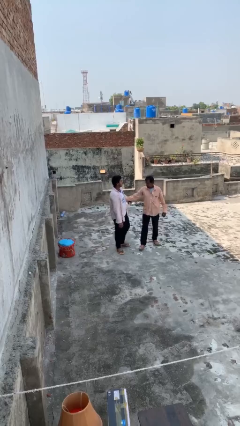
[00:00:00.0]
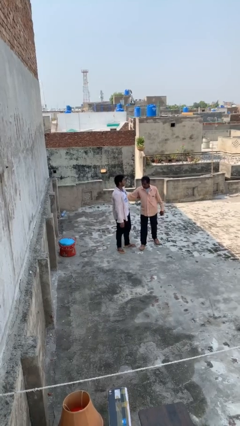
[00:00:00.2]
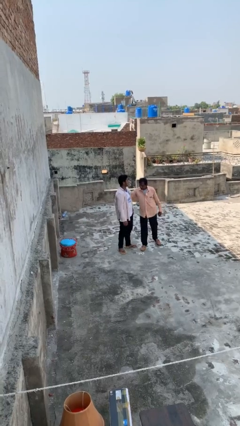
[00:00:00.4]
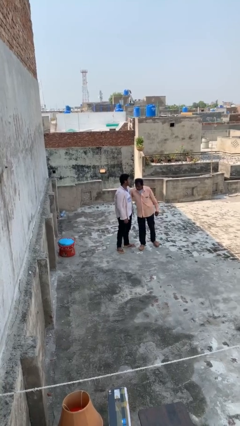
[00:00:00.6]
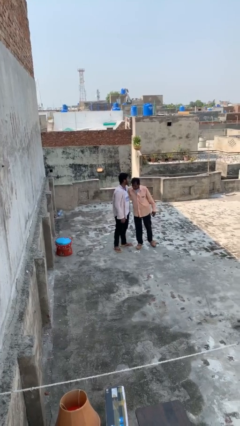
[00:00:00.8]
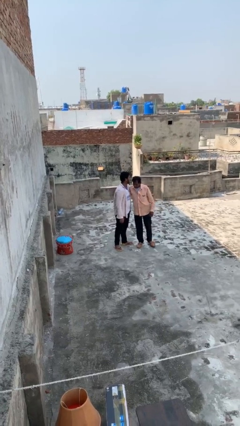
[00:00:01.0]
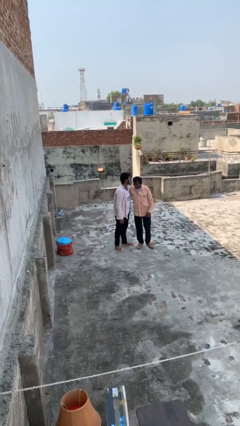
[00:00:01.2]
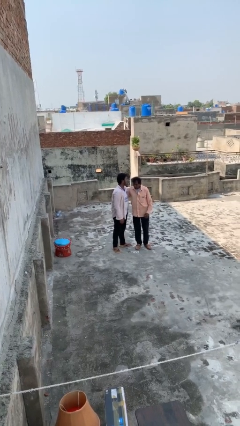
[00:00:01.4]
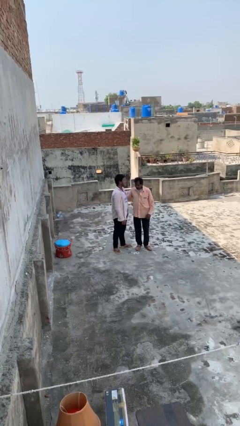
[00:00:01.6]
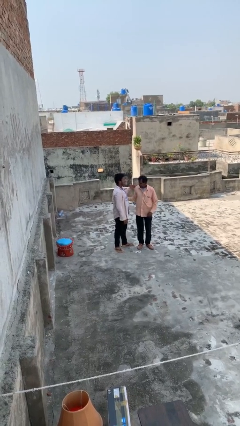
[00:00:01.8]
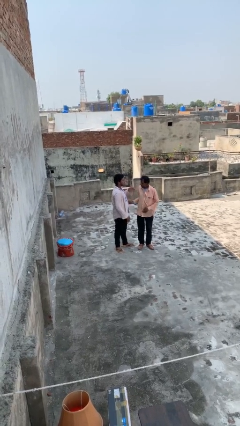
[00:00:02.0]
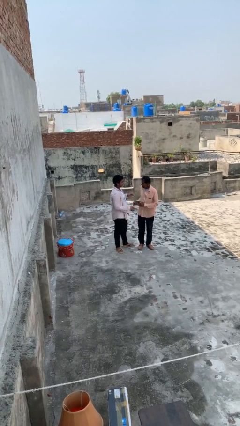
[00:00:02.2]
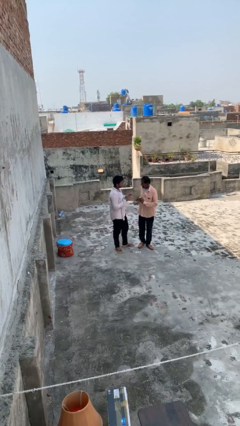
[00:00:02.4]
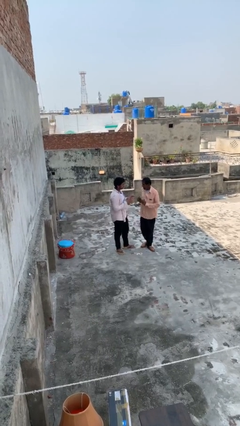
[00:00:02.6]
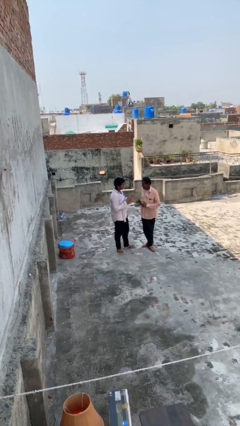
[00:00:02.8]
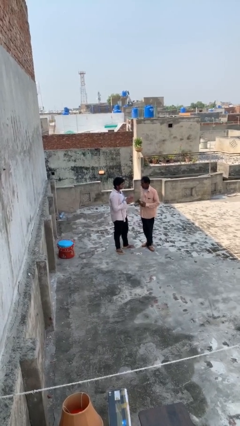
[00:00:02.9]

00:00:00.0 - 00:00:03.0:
person embraces person

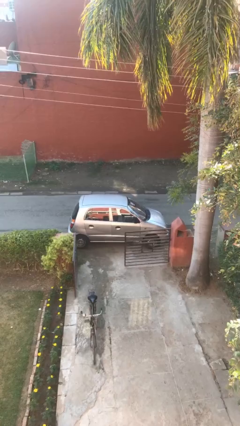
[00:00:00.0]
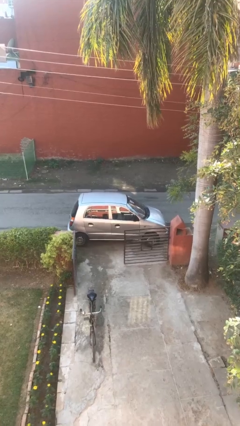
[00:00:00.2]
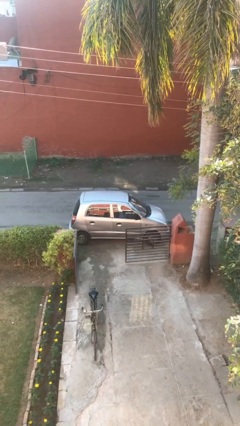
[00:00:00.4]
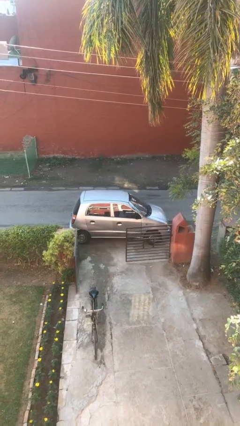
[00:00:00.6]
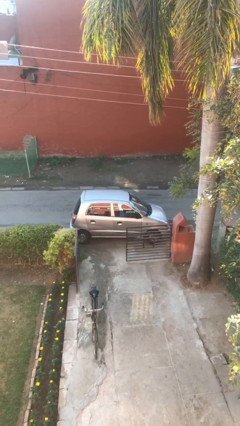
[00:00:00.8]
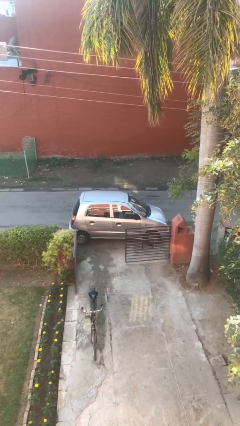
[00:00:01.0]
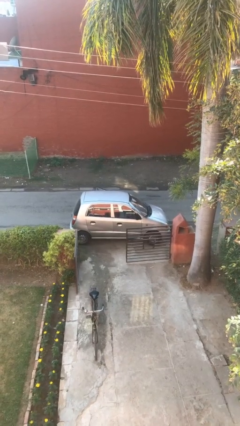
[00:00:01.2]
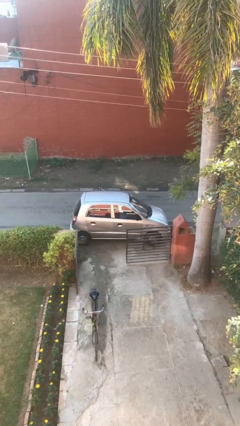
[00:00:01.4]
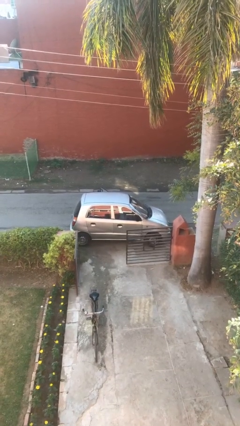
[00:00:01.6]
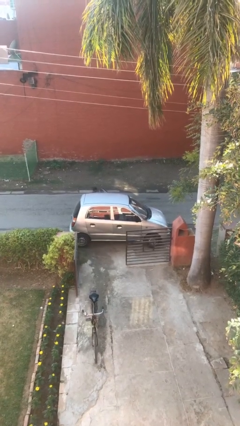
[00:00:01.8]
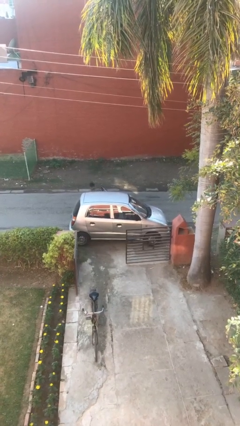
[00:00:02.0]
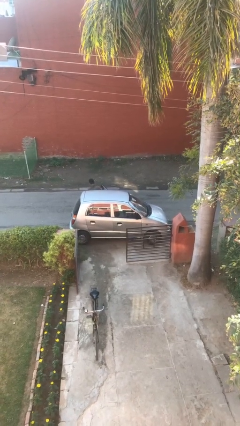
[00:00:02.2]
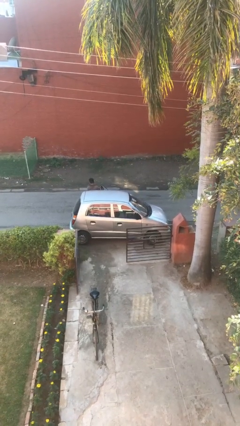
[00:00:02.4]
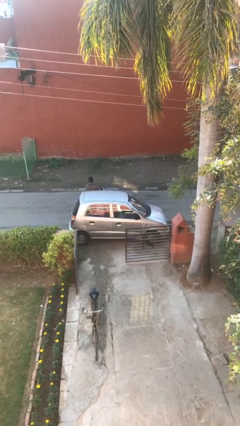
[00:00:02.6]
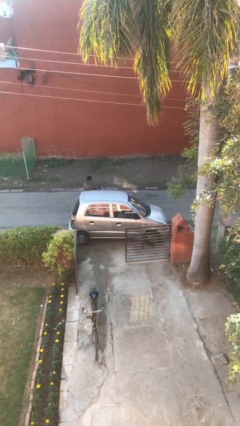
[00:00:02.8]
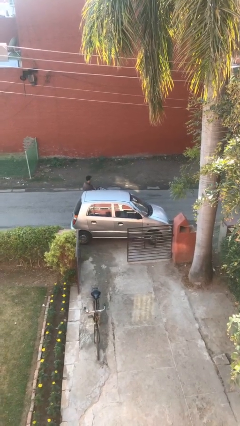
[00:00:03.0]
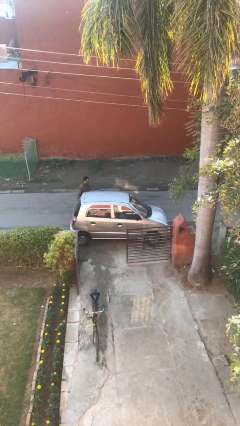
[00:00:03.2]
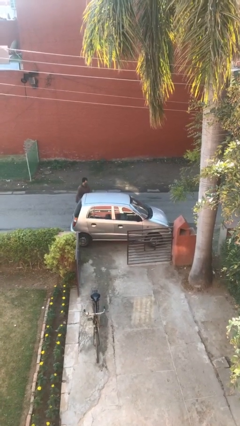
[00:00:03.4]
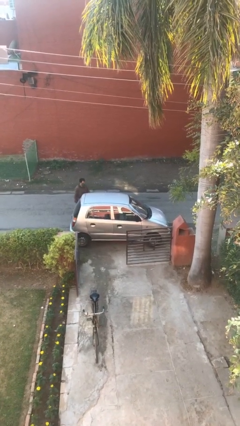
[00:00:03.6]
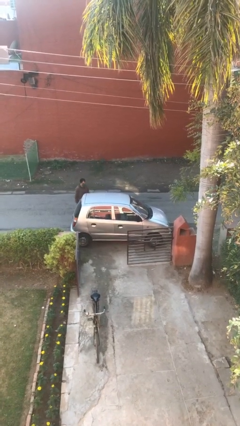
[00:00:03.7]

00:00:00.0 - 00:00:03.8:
car drops off person

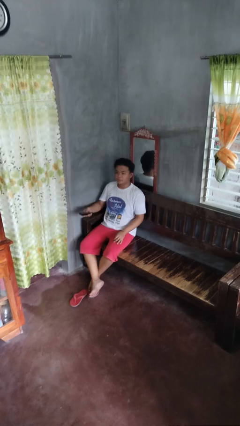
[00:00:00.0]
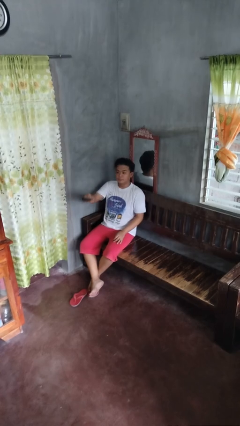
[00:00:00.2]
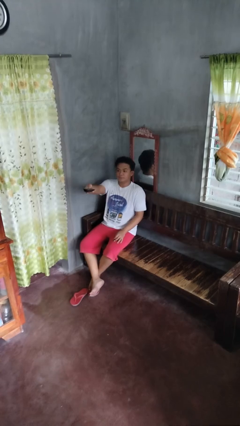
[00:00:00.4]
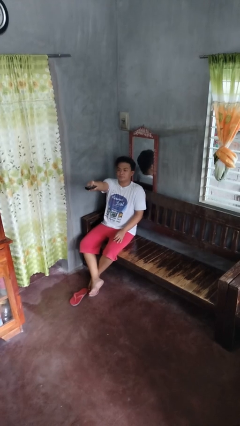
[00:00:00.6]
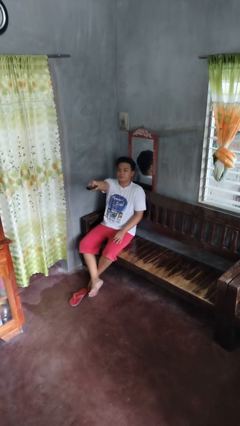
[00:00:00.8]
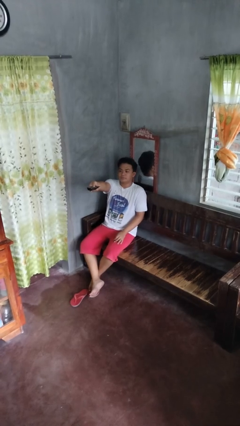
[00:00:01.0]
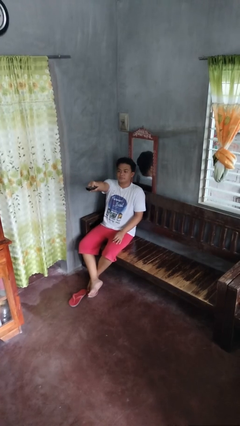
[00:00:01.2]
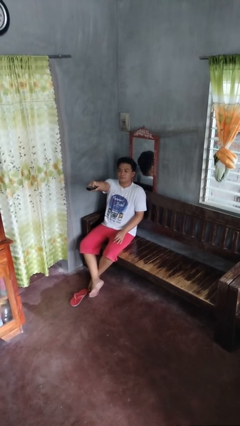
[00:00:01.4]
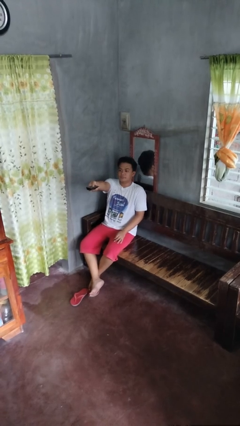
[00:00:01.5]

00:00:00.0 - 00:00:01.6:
person uses television remote

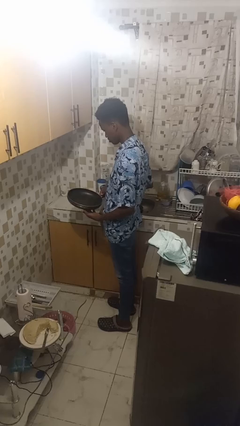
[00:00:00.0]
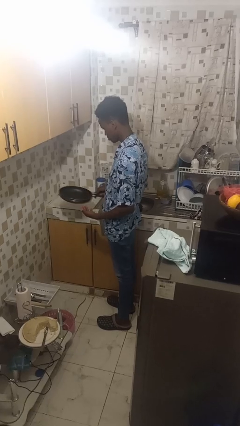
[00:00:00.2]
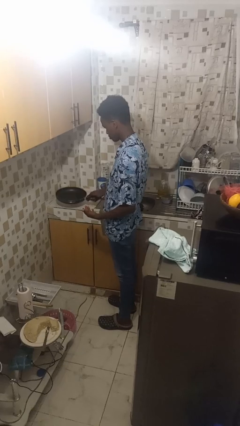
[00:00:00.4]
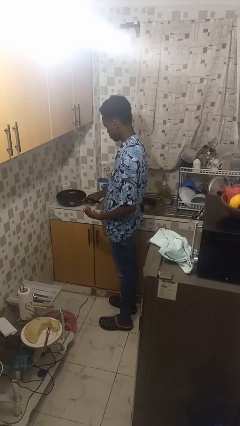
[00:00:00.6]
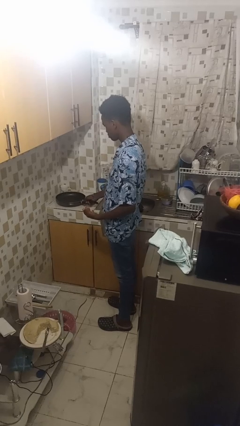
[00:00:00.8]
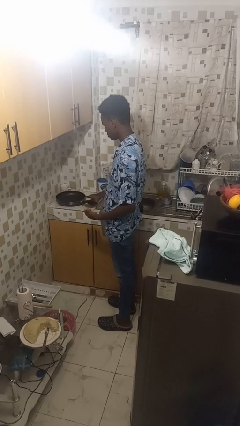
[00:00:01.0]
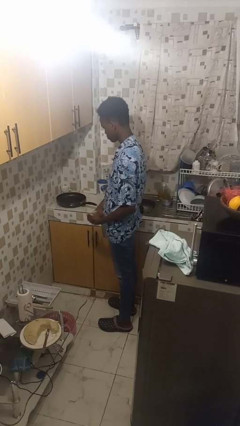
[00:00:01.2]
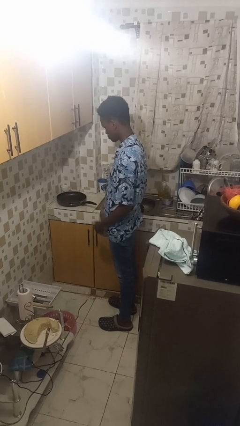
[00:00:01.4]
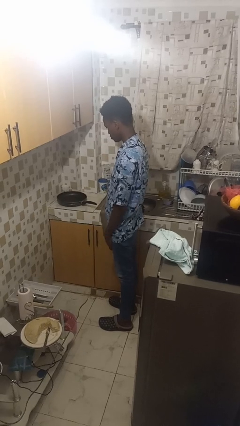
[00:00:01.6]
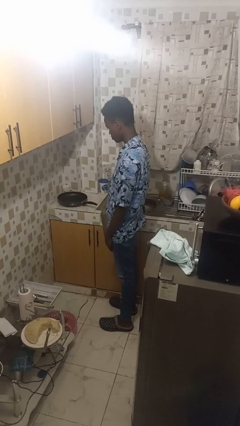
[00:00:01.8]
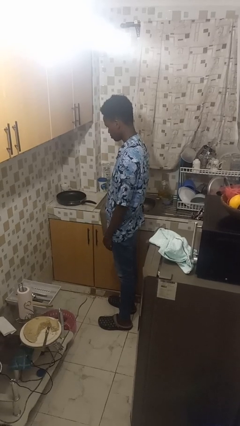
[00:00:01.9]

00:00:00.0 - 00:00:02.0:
person puts down object on countertop

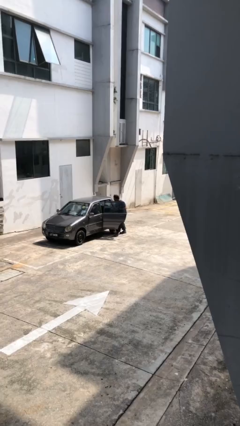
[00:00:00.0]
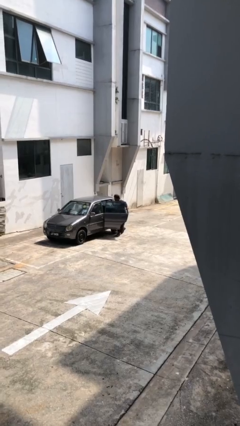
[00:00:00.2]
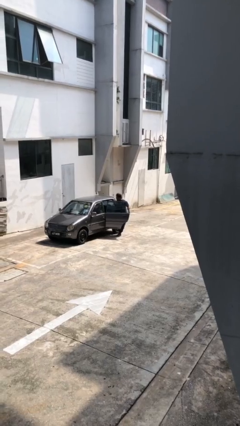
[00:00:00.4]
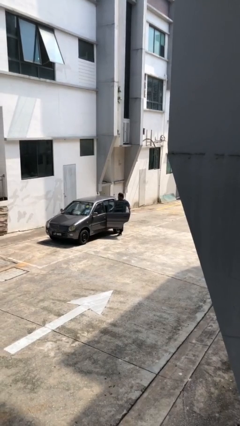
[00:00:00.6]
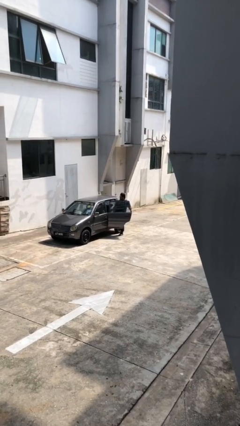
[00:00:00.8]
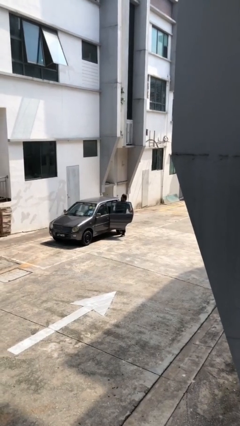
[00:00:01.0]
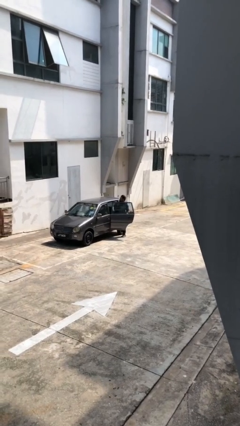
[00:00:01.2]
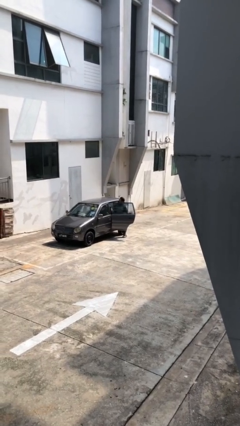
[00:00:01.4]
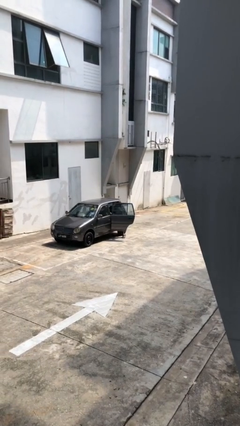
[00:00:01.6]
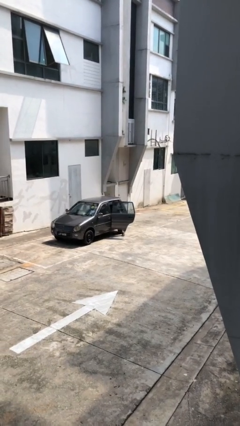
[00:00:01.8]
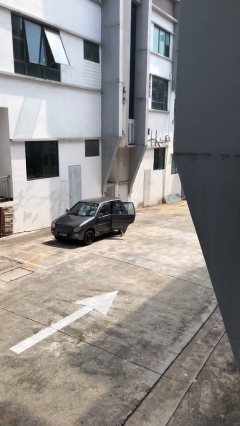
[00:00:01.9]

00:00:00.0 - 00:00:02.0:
person enters car

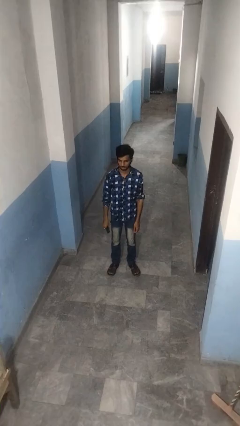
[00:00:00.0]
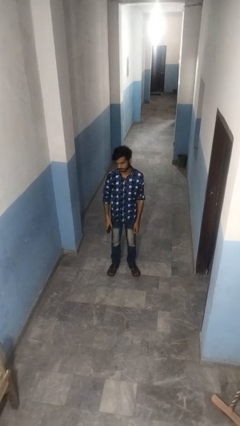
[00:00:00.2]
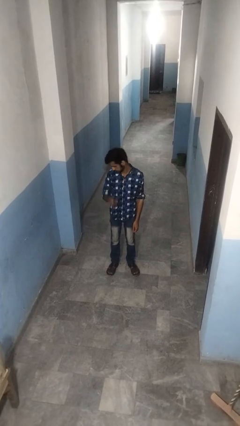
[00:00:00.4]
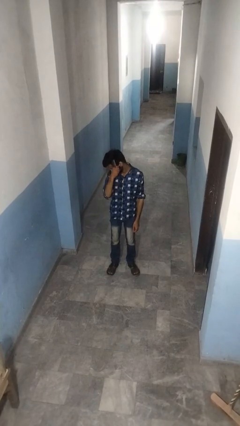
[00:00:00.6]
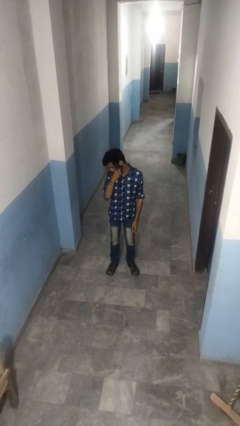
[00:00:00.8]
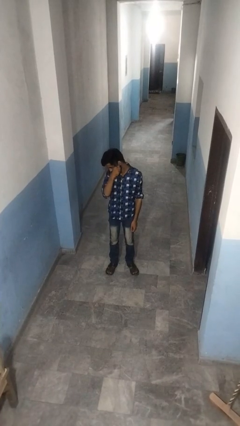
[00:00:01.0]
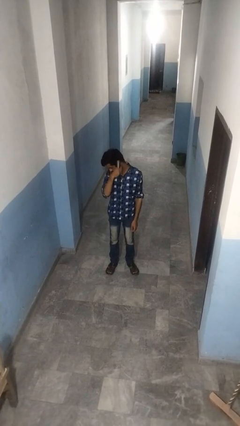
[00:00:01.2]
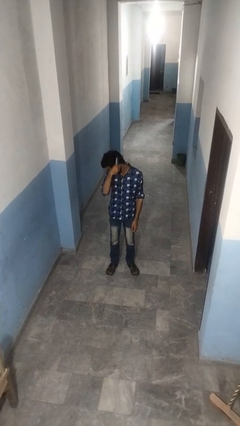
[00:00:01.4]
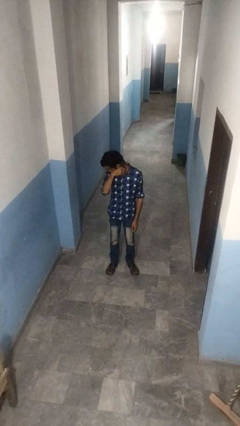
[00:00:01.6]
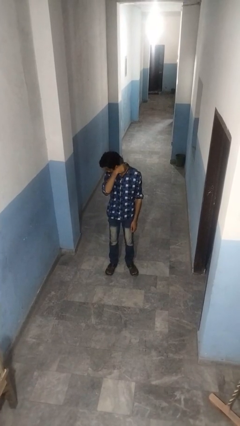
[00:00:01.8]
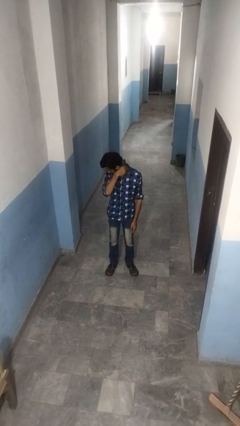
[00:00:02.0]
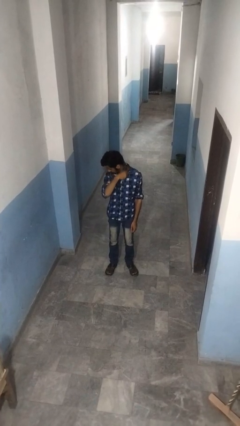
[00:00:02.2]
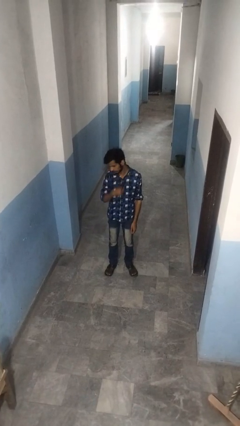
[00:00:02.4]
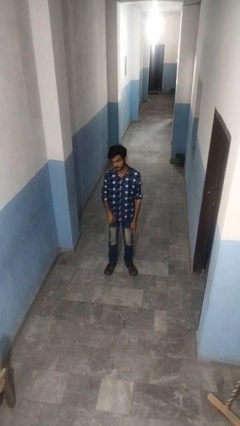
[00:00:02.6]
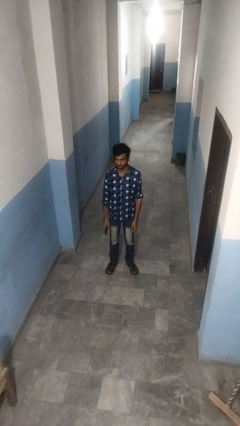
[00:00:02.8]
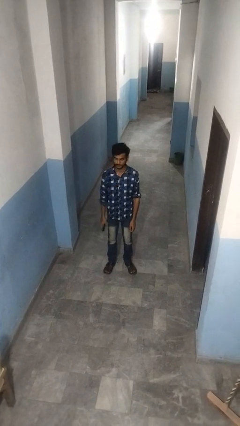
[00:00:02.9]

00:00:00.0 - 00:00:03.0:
person brushes hair

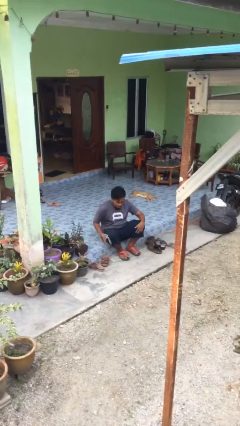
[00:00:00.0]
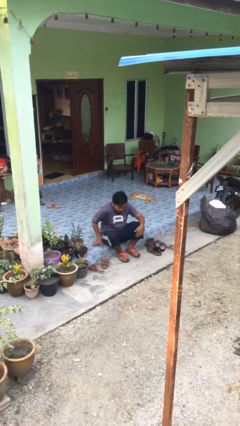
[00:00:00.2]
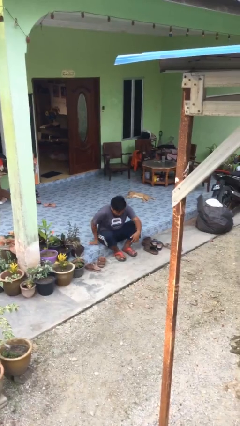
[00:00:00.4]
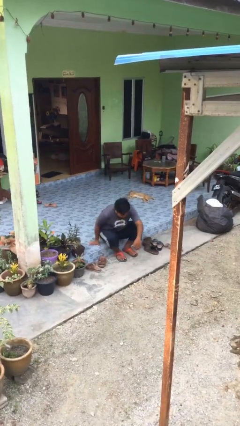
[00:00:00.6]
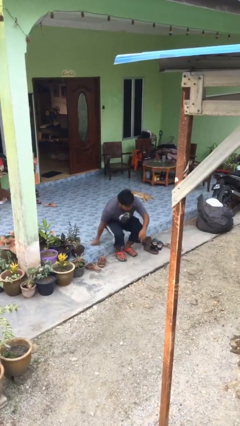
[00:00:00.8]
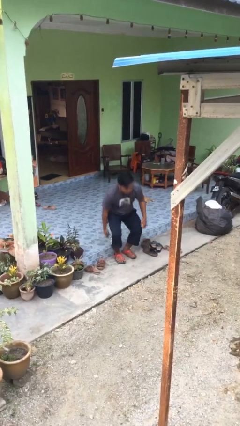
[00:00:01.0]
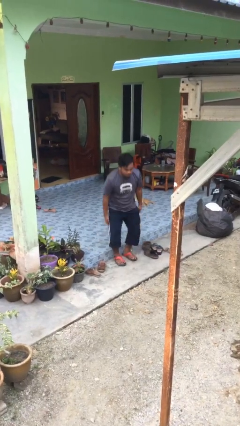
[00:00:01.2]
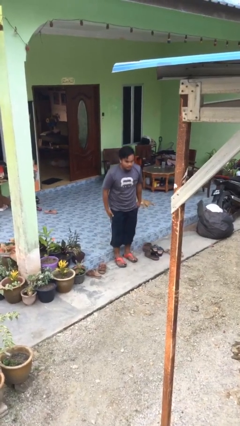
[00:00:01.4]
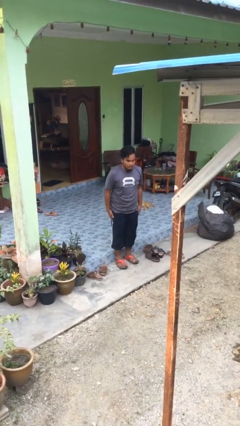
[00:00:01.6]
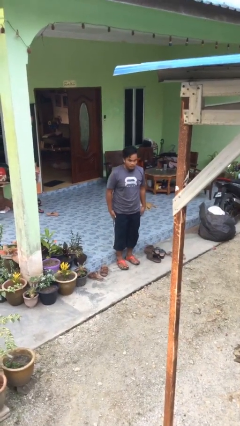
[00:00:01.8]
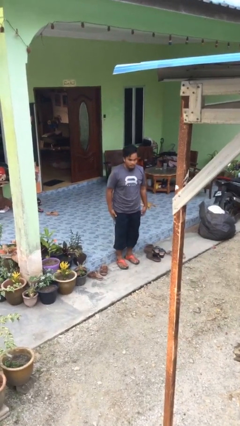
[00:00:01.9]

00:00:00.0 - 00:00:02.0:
person stands up
